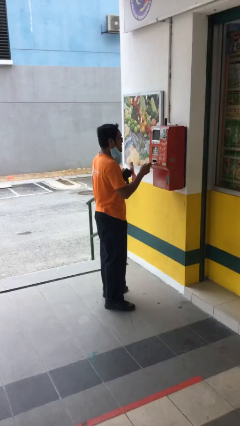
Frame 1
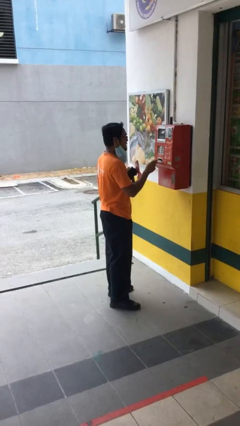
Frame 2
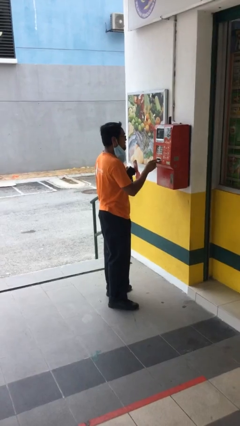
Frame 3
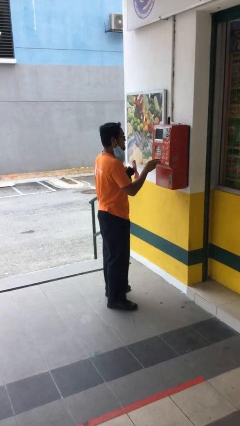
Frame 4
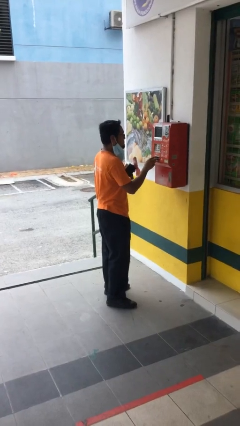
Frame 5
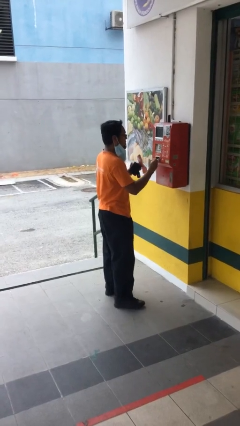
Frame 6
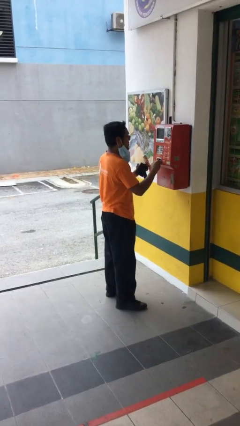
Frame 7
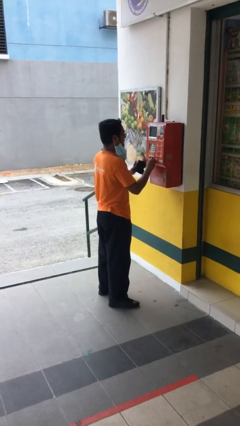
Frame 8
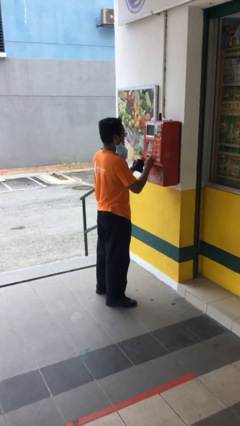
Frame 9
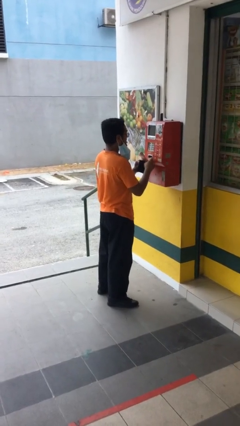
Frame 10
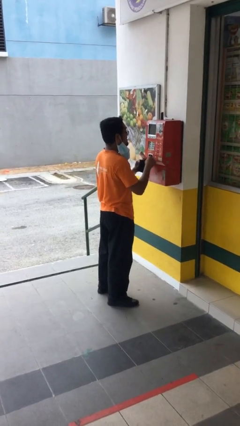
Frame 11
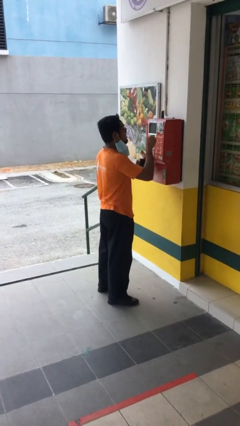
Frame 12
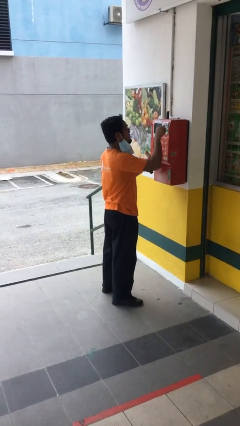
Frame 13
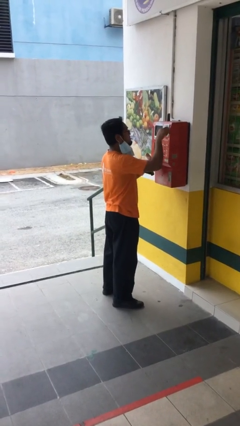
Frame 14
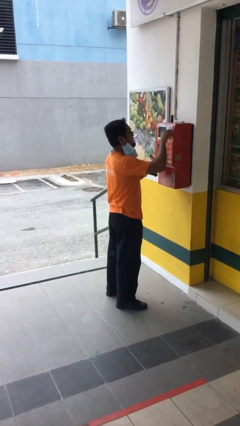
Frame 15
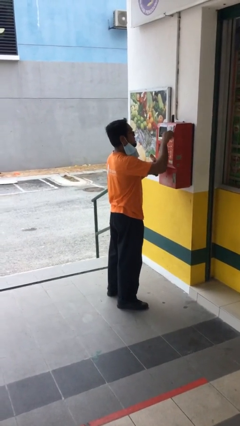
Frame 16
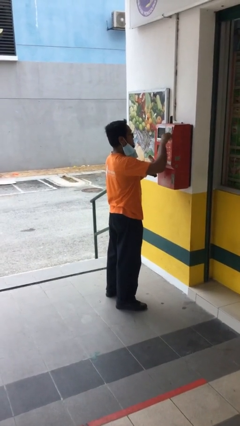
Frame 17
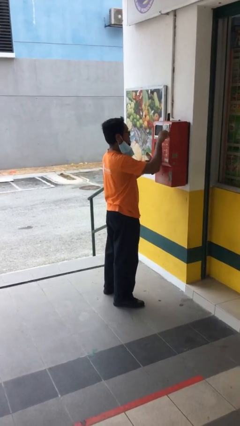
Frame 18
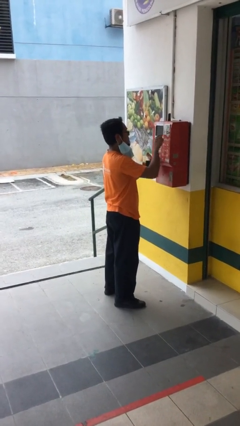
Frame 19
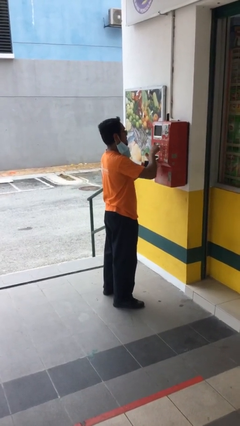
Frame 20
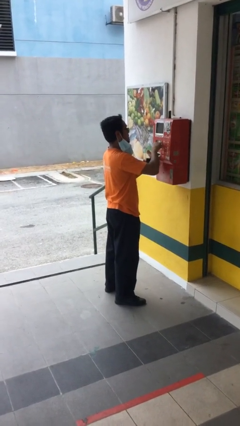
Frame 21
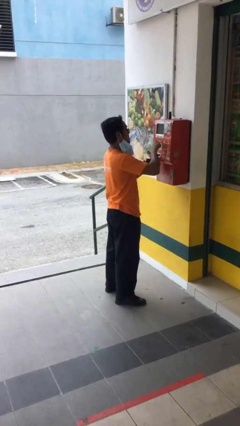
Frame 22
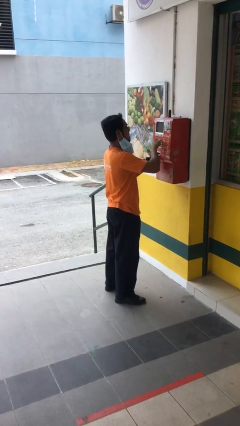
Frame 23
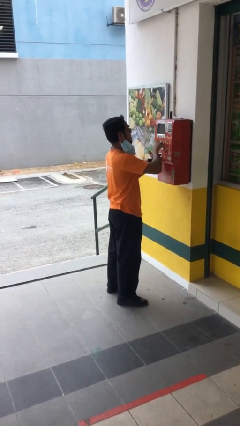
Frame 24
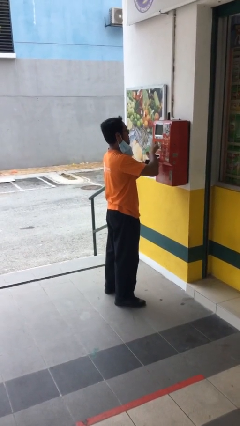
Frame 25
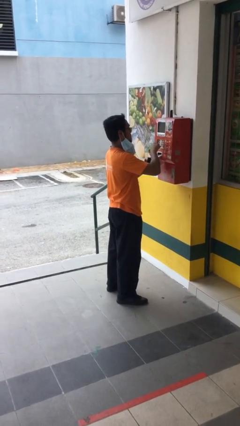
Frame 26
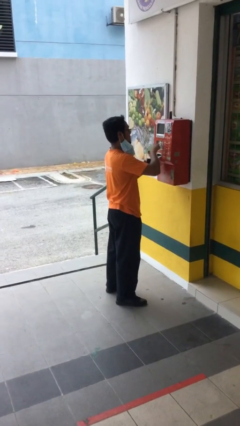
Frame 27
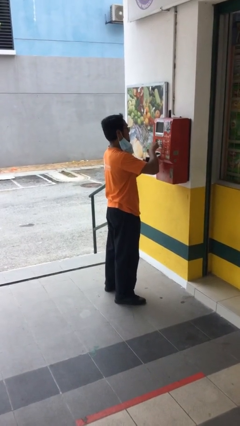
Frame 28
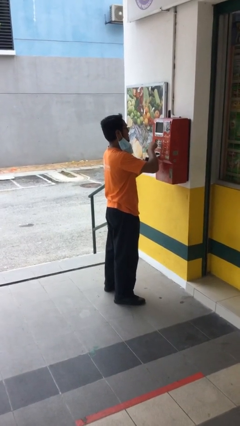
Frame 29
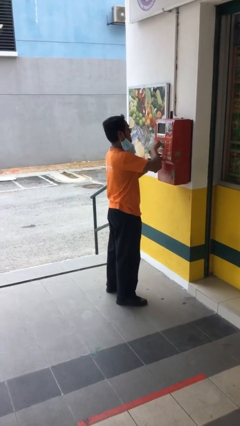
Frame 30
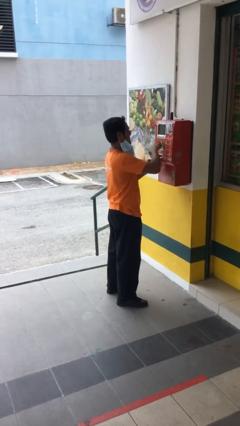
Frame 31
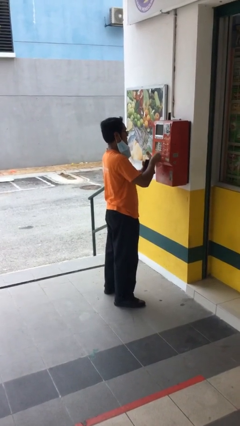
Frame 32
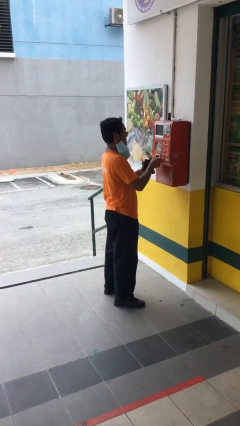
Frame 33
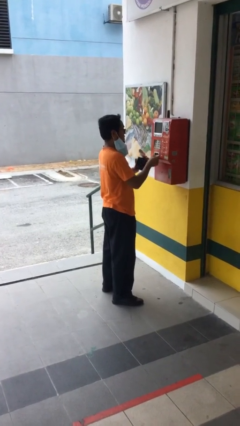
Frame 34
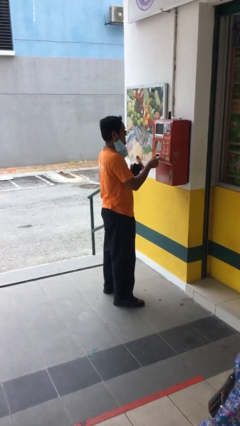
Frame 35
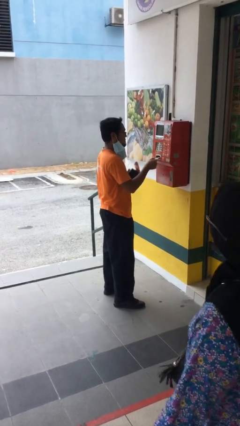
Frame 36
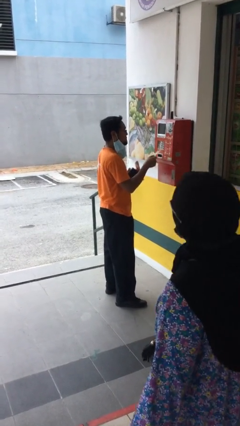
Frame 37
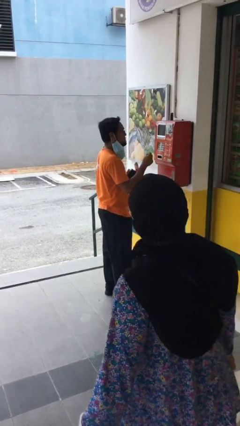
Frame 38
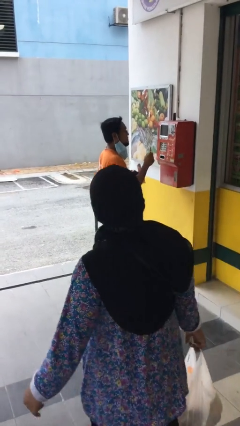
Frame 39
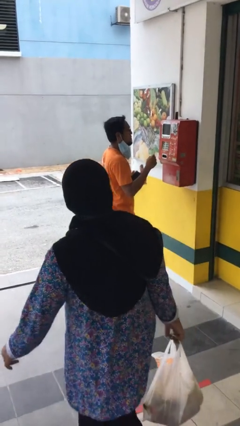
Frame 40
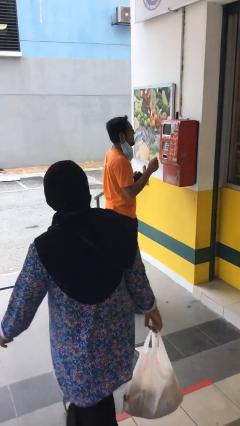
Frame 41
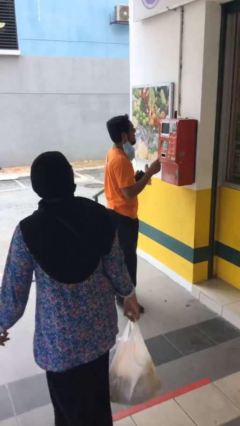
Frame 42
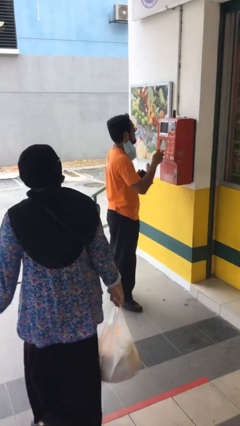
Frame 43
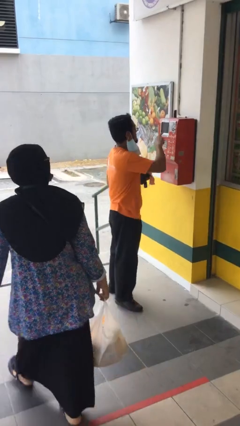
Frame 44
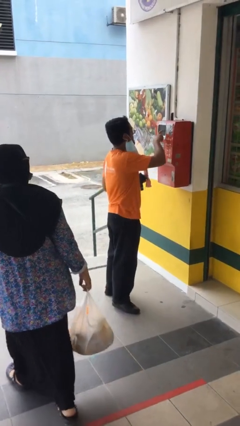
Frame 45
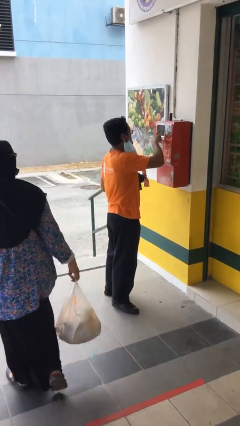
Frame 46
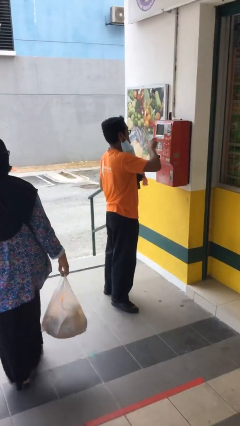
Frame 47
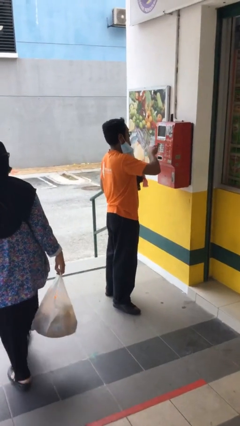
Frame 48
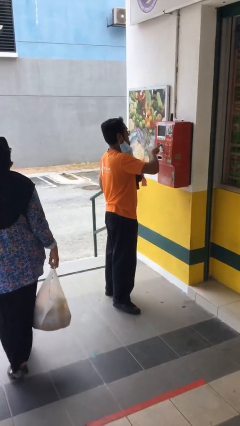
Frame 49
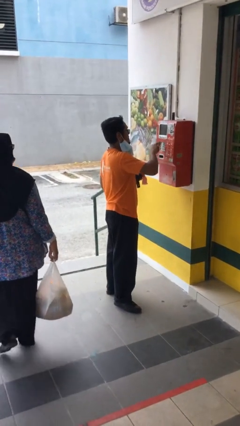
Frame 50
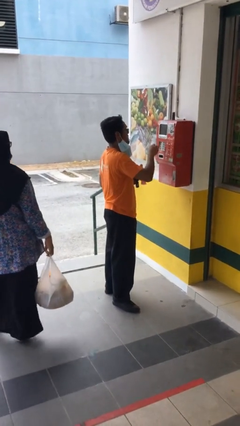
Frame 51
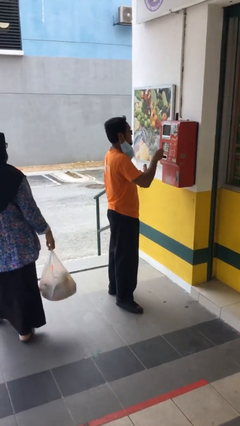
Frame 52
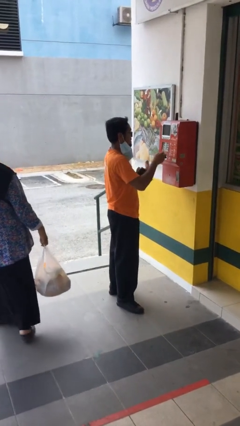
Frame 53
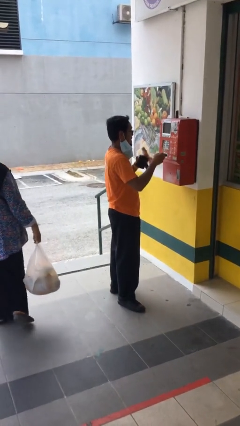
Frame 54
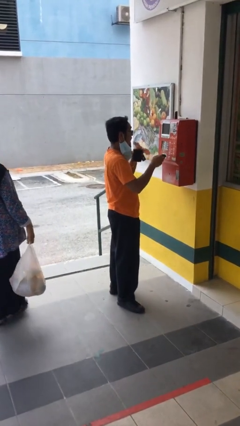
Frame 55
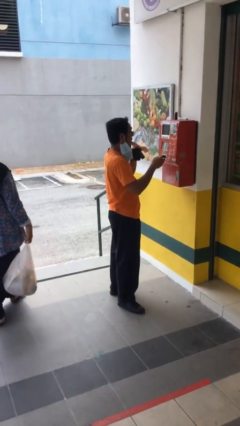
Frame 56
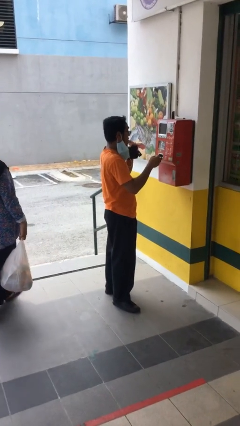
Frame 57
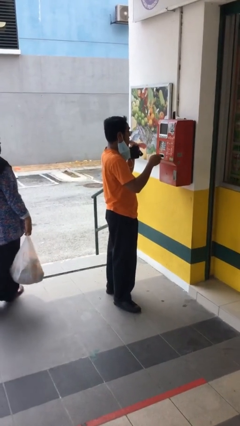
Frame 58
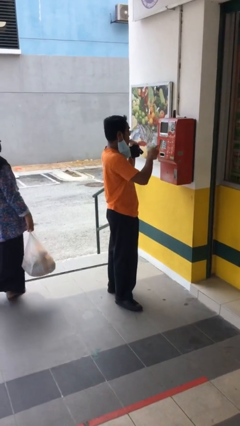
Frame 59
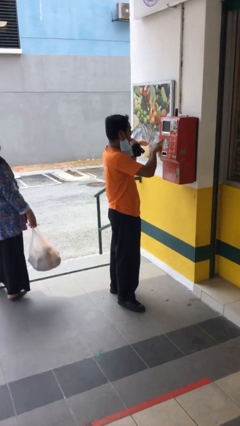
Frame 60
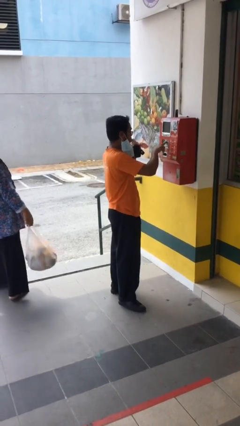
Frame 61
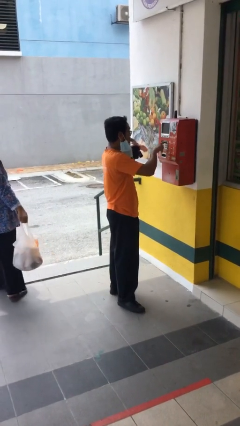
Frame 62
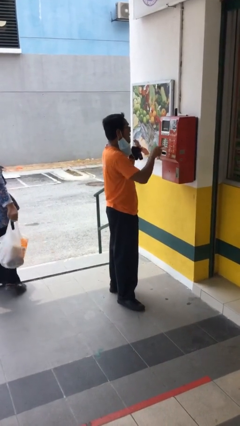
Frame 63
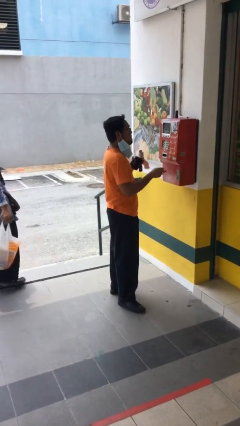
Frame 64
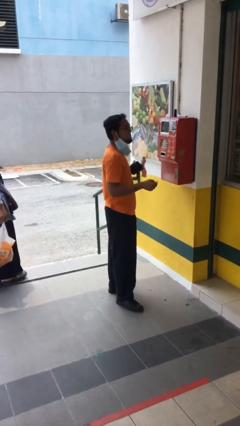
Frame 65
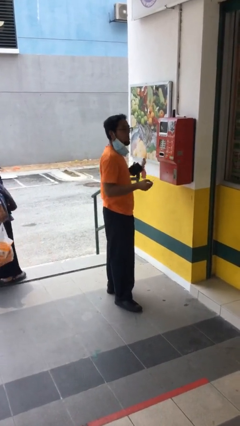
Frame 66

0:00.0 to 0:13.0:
person purchases from machine

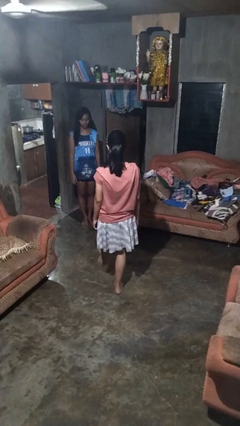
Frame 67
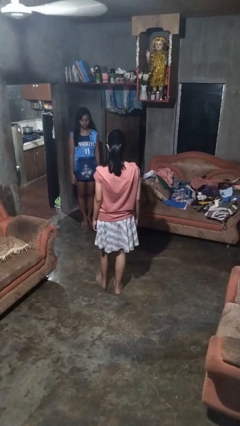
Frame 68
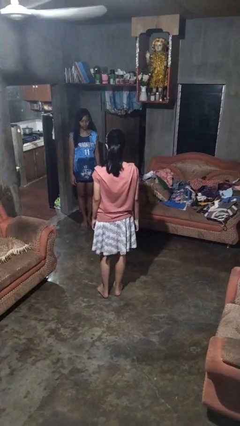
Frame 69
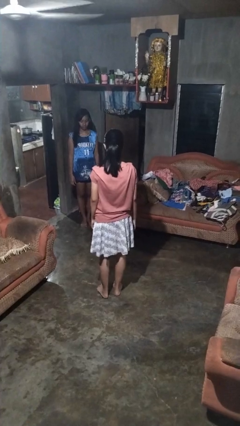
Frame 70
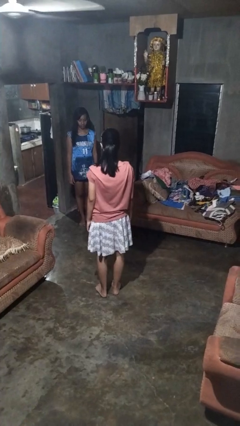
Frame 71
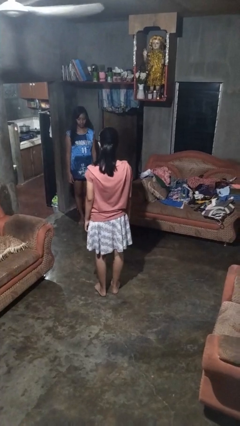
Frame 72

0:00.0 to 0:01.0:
person kicks object to person

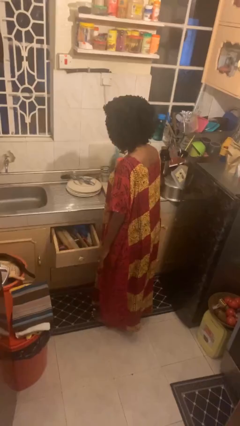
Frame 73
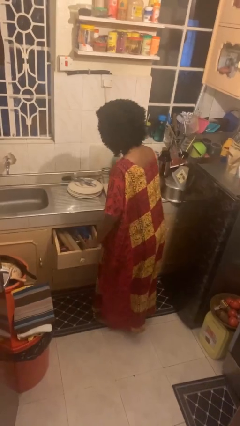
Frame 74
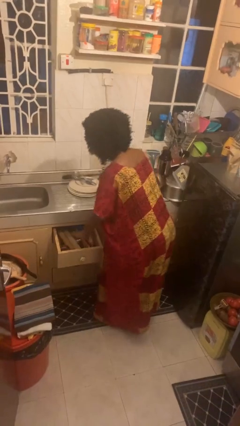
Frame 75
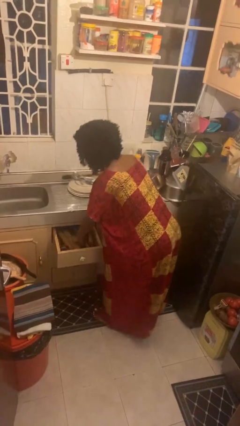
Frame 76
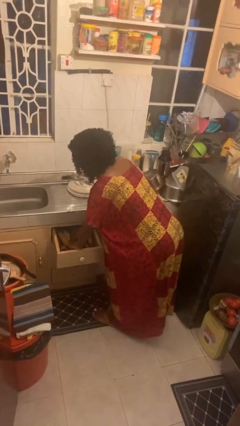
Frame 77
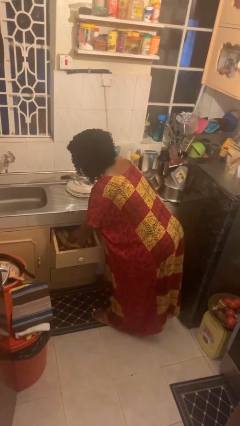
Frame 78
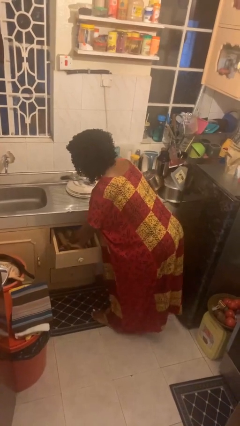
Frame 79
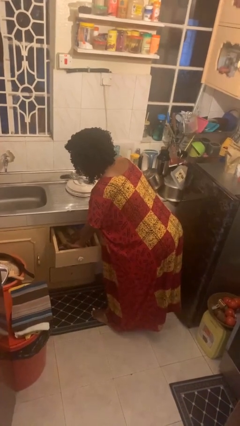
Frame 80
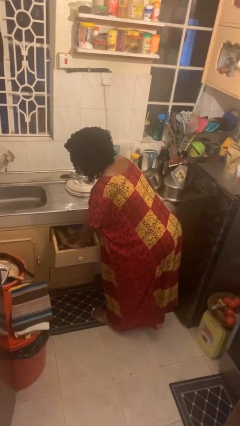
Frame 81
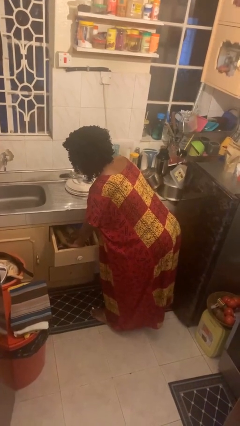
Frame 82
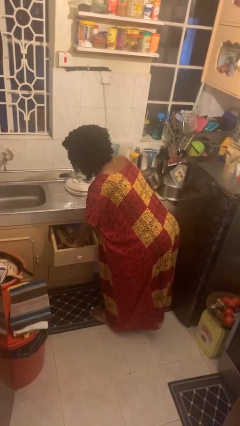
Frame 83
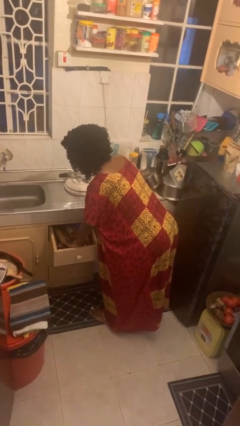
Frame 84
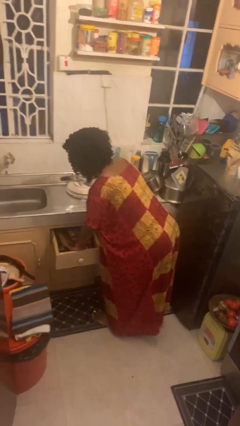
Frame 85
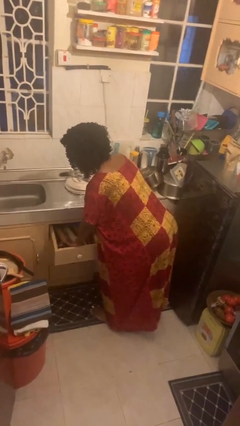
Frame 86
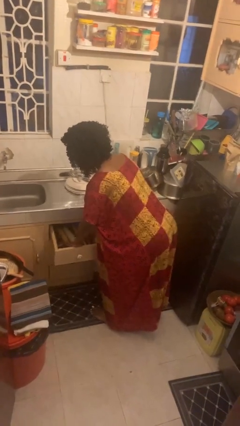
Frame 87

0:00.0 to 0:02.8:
person searches in kitchen drawer

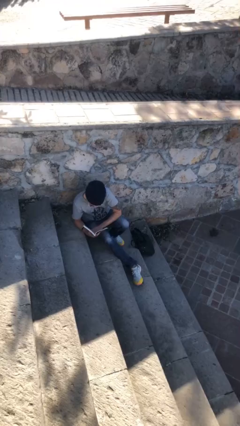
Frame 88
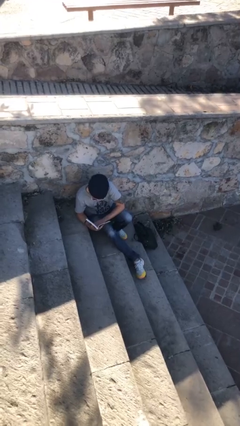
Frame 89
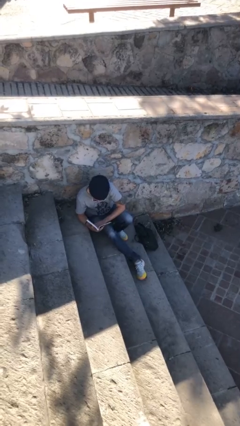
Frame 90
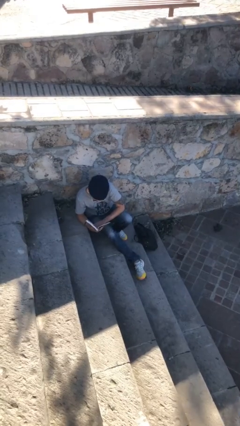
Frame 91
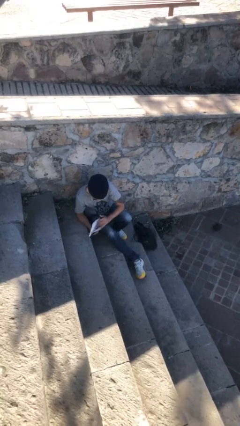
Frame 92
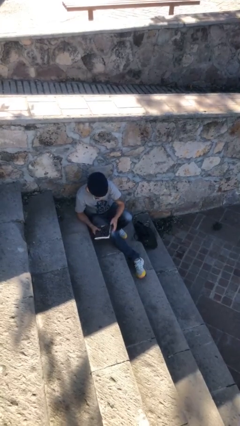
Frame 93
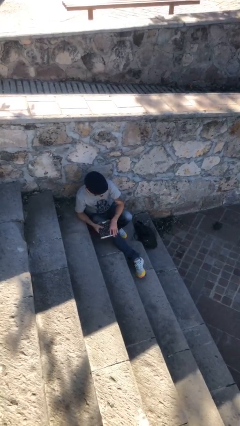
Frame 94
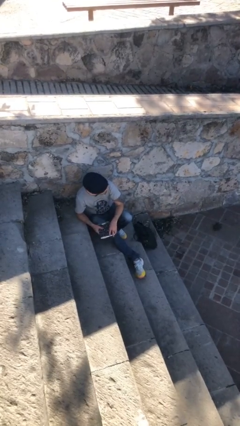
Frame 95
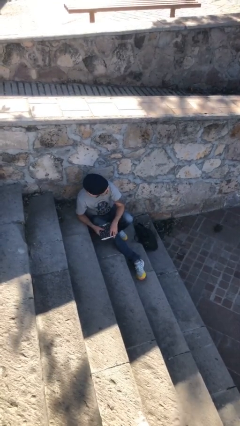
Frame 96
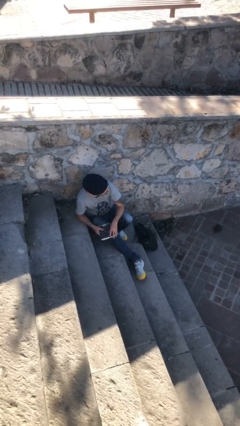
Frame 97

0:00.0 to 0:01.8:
person reads document
